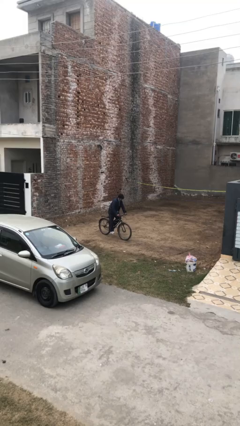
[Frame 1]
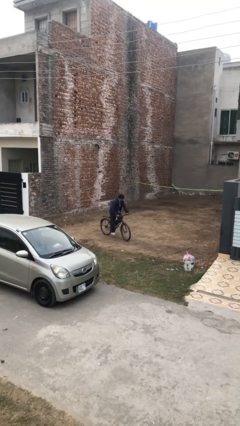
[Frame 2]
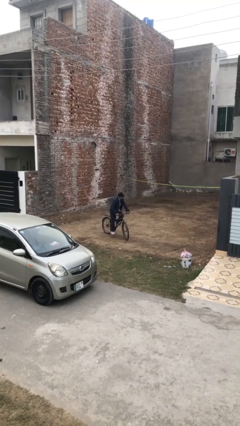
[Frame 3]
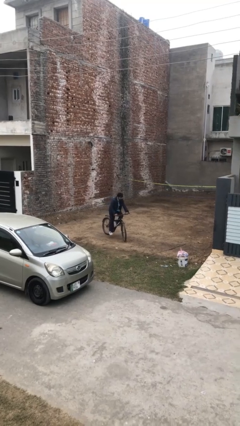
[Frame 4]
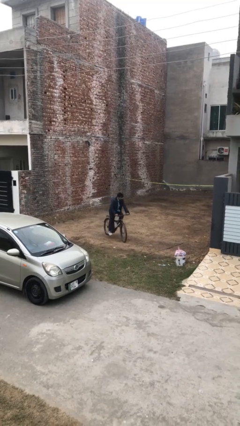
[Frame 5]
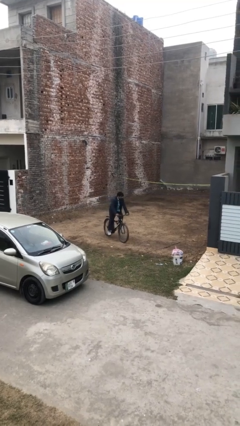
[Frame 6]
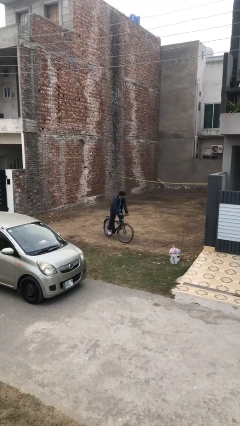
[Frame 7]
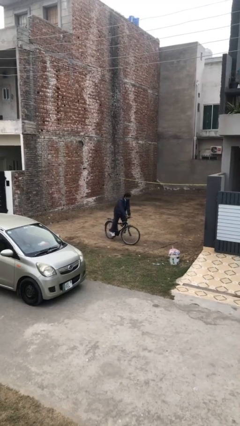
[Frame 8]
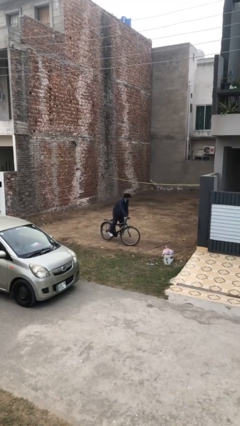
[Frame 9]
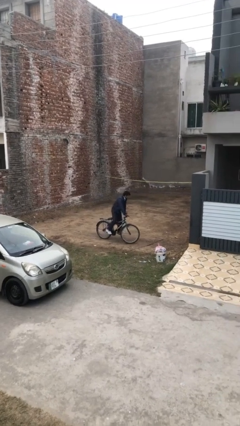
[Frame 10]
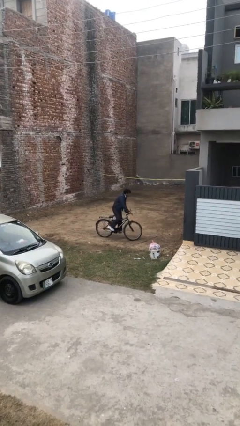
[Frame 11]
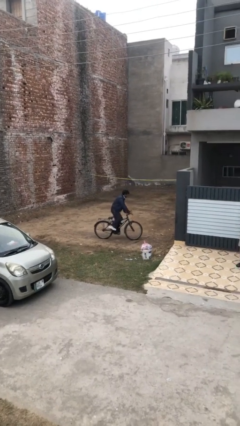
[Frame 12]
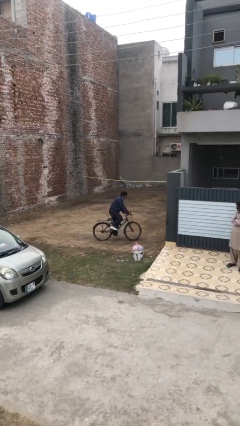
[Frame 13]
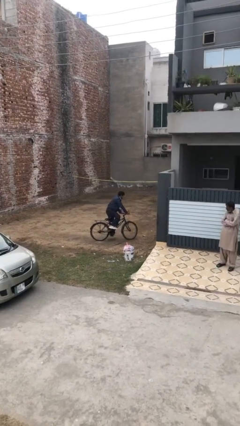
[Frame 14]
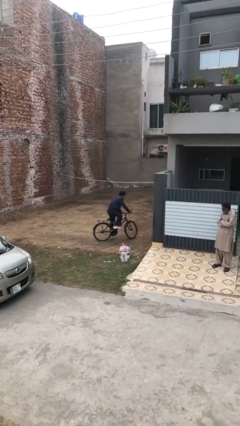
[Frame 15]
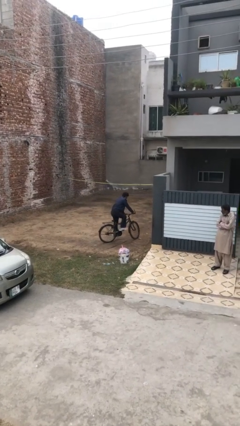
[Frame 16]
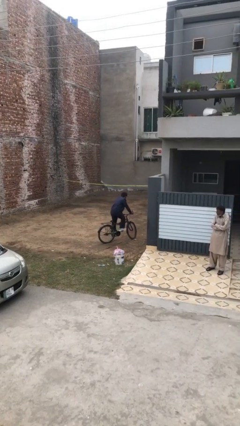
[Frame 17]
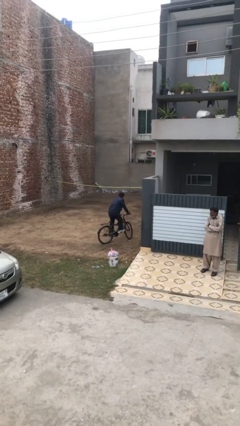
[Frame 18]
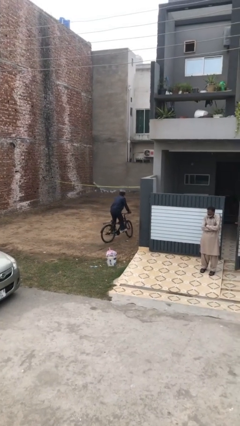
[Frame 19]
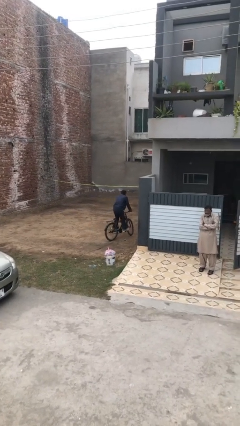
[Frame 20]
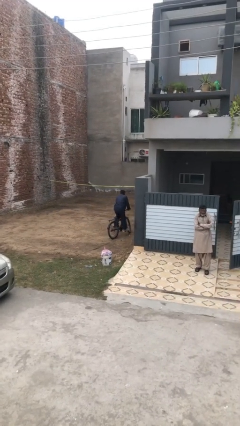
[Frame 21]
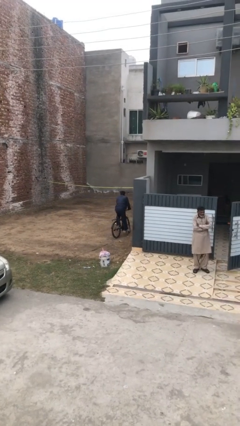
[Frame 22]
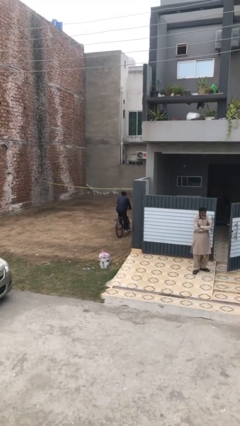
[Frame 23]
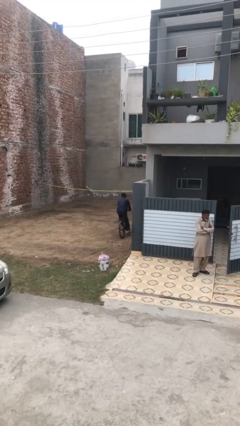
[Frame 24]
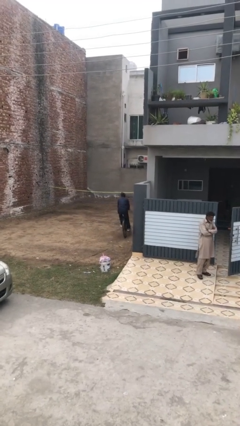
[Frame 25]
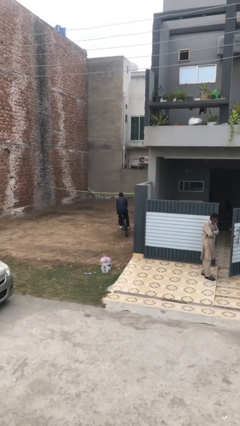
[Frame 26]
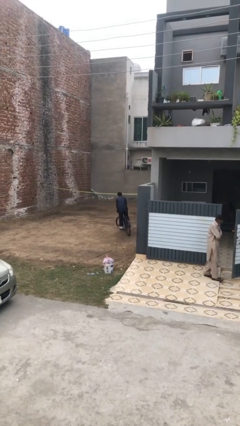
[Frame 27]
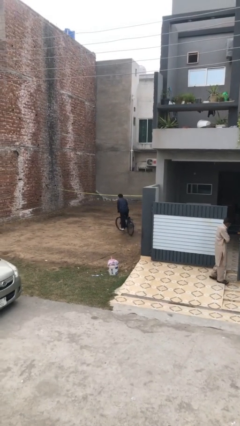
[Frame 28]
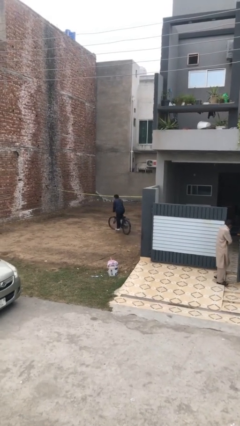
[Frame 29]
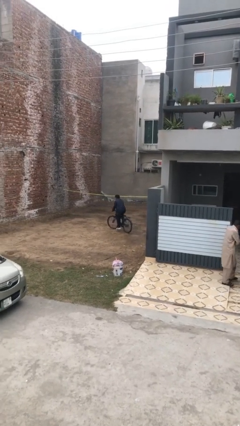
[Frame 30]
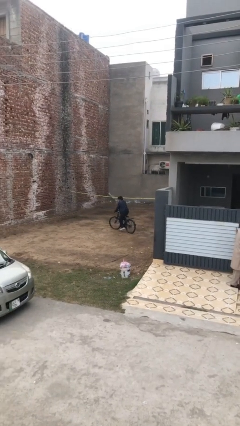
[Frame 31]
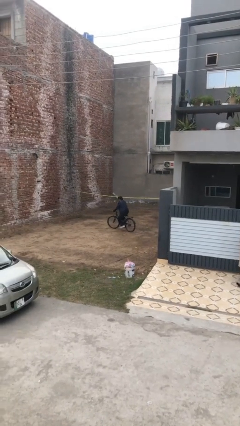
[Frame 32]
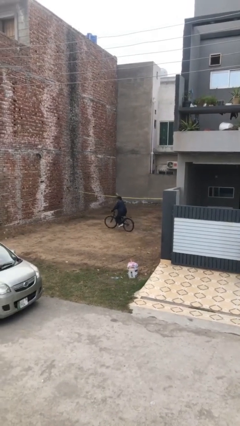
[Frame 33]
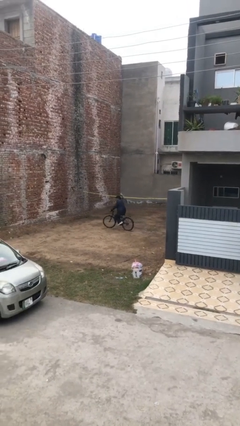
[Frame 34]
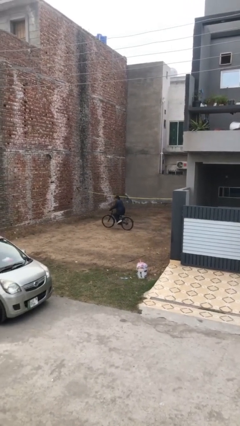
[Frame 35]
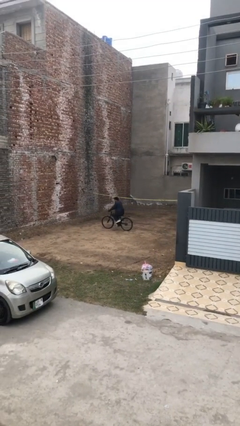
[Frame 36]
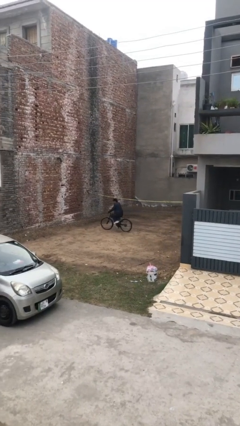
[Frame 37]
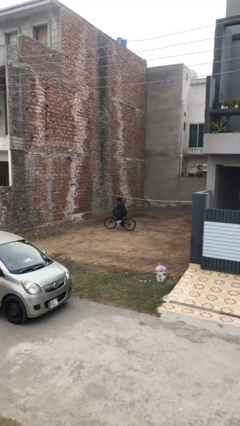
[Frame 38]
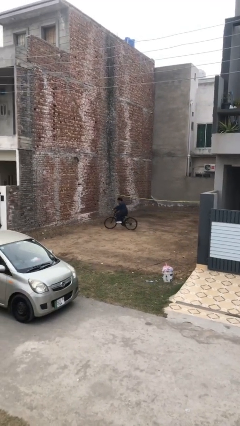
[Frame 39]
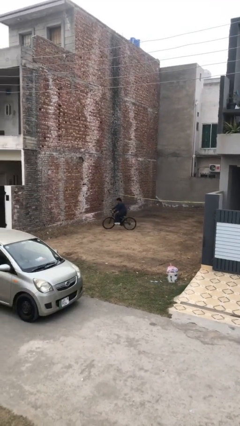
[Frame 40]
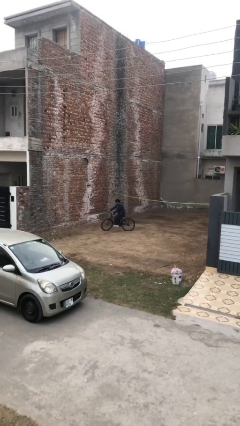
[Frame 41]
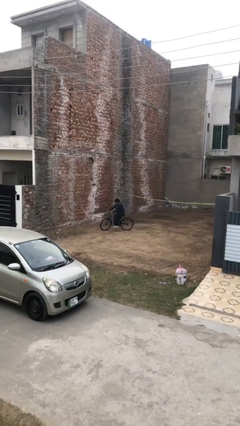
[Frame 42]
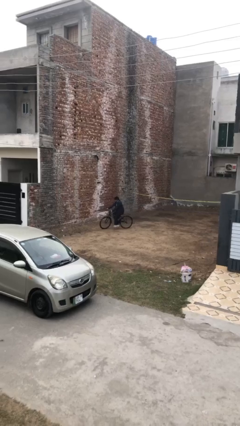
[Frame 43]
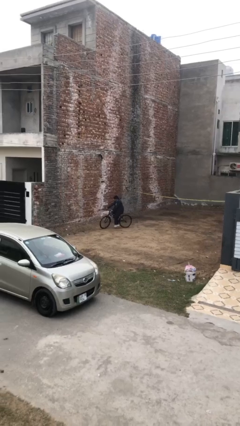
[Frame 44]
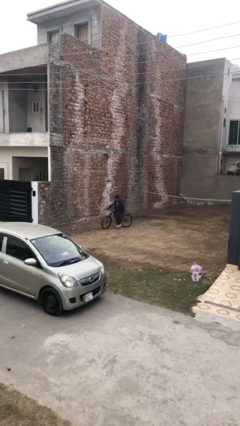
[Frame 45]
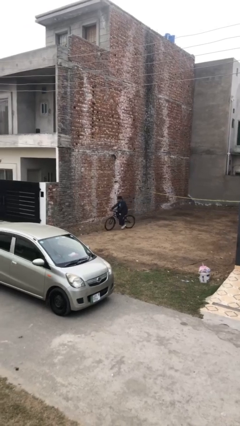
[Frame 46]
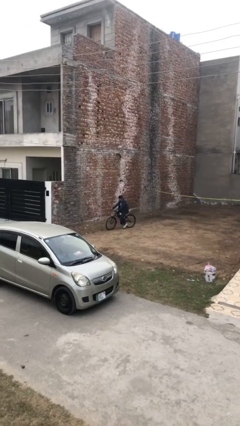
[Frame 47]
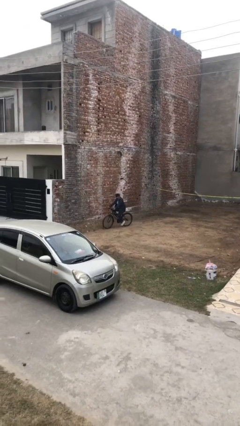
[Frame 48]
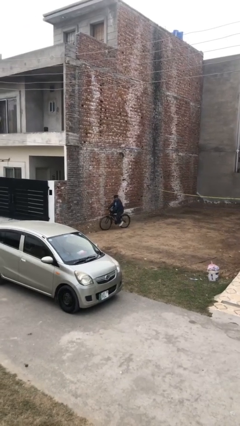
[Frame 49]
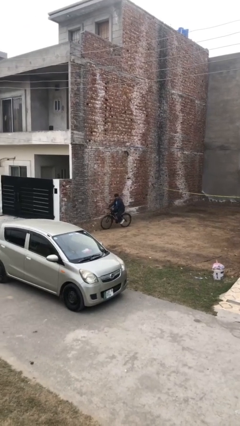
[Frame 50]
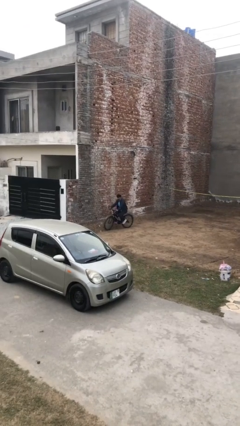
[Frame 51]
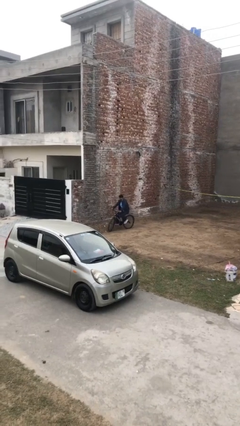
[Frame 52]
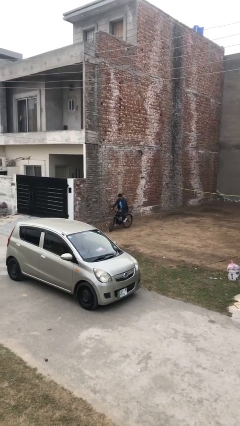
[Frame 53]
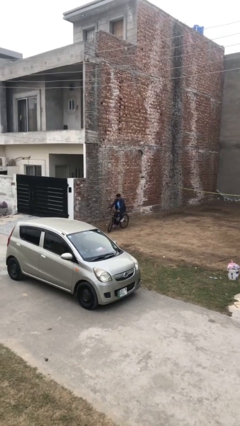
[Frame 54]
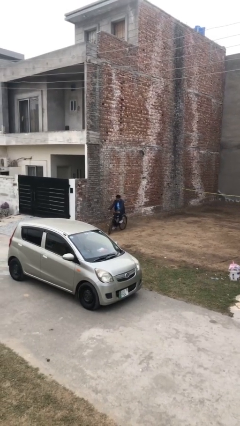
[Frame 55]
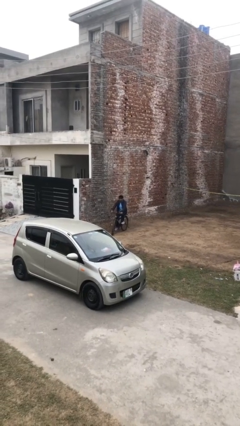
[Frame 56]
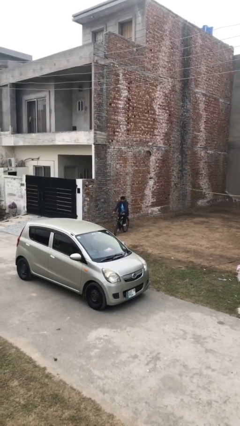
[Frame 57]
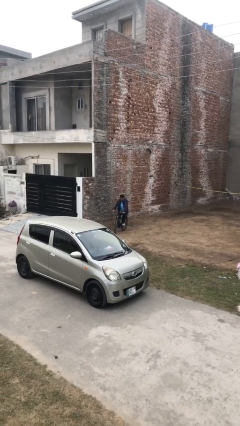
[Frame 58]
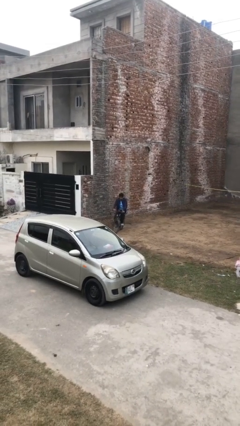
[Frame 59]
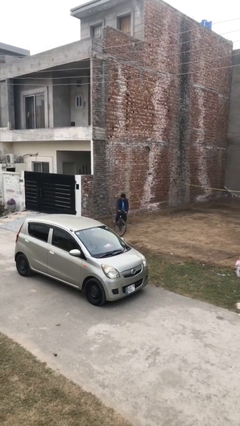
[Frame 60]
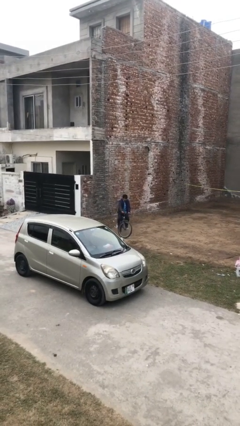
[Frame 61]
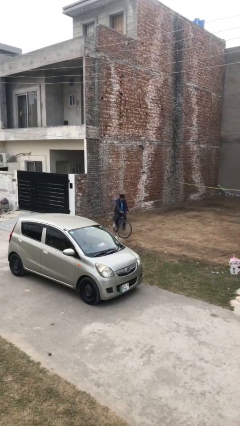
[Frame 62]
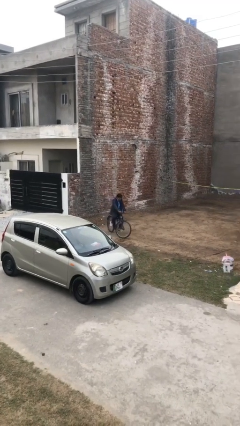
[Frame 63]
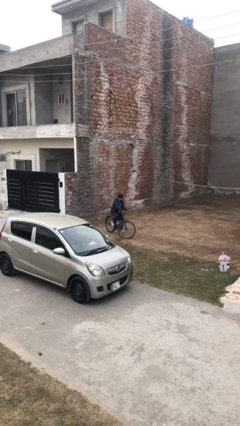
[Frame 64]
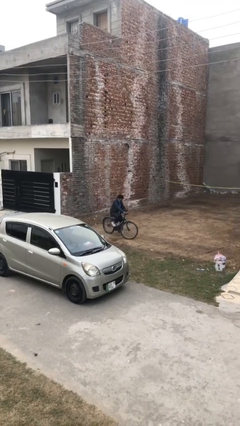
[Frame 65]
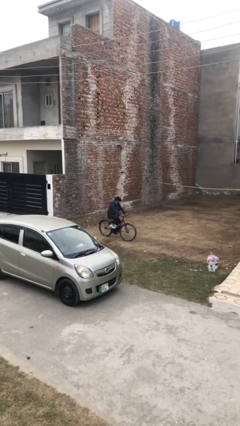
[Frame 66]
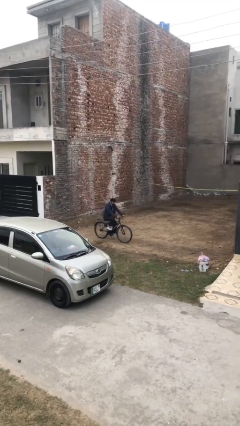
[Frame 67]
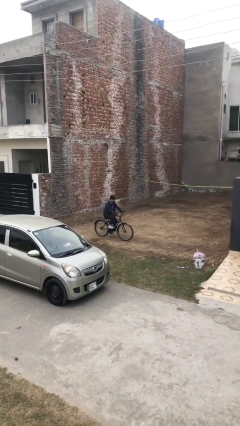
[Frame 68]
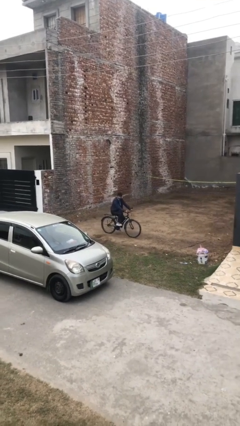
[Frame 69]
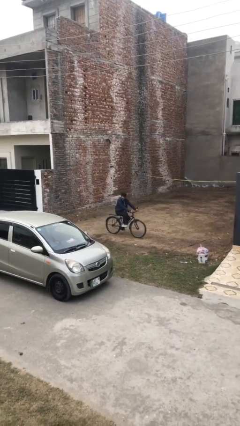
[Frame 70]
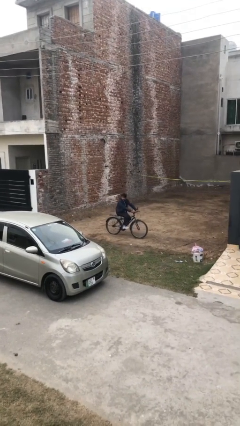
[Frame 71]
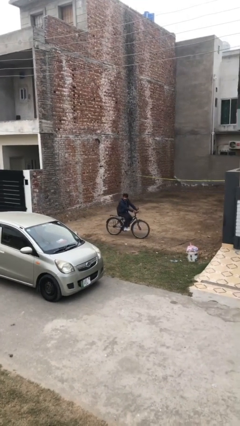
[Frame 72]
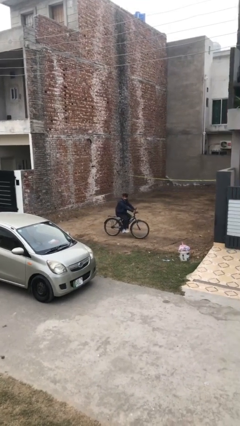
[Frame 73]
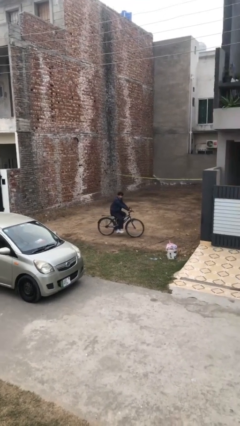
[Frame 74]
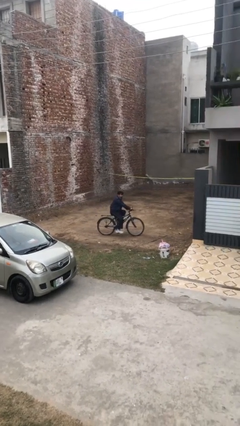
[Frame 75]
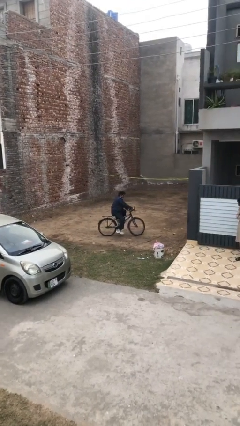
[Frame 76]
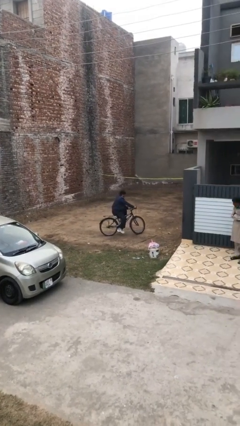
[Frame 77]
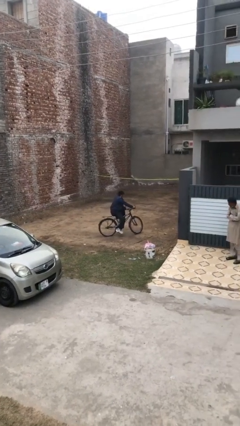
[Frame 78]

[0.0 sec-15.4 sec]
person rides bicycle

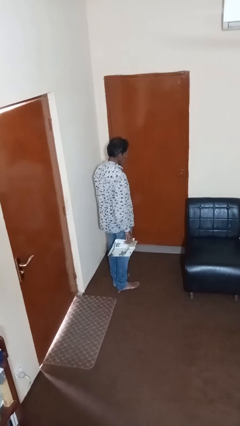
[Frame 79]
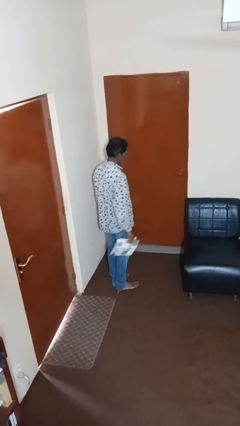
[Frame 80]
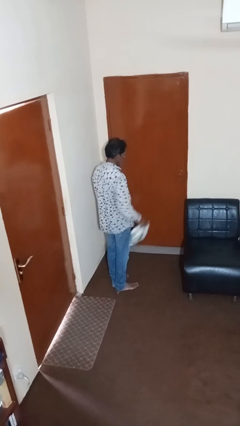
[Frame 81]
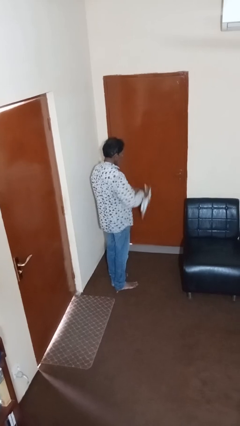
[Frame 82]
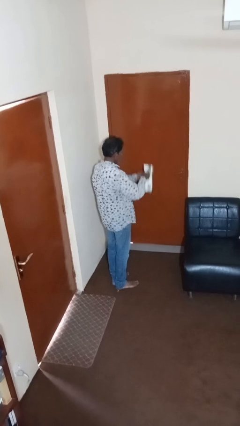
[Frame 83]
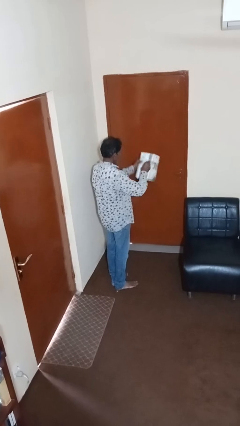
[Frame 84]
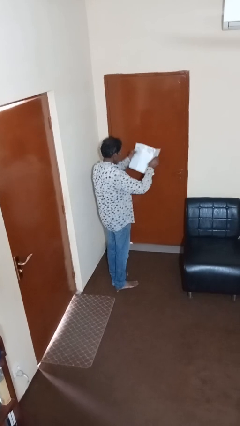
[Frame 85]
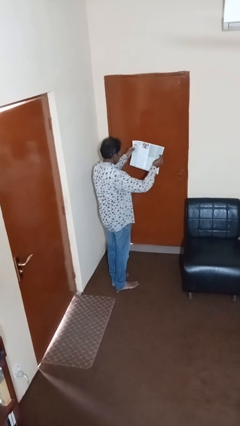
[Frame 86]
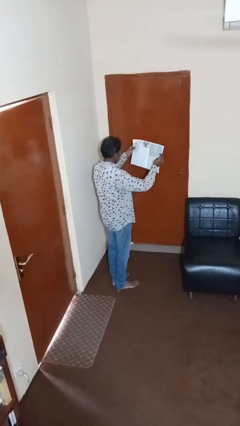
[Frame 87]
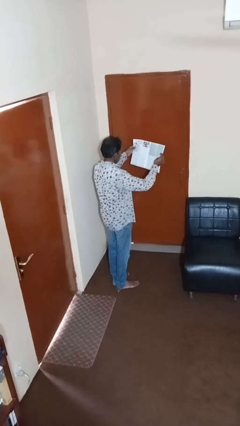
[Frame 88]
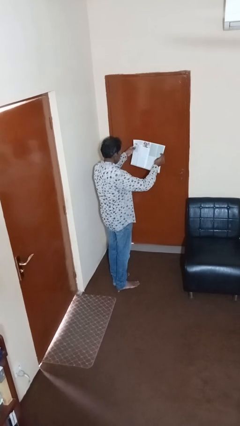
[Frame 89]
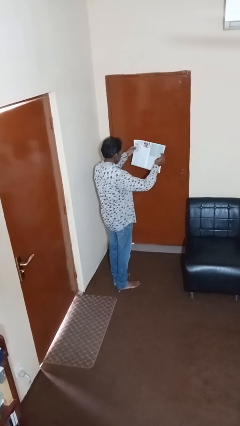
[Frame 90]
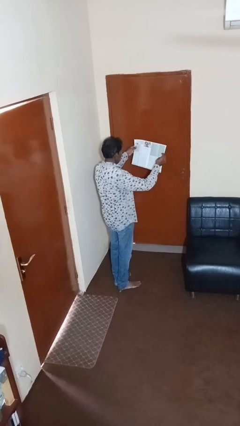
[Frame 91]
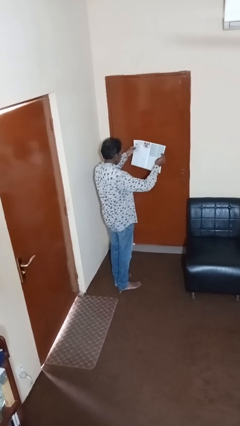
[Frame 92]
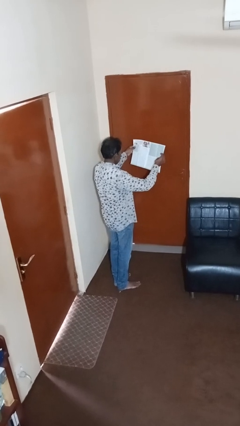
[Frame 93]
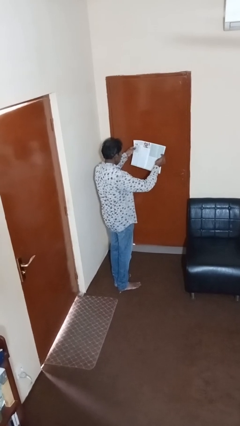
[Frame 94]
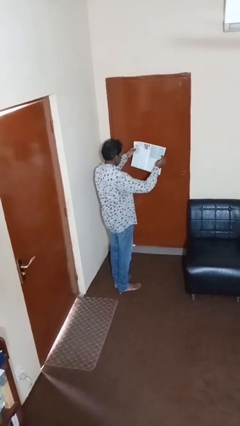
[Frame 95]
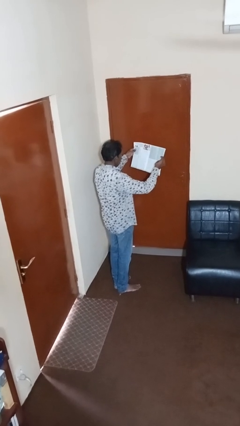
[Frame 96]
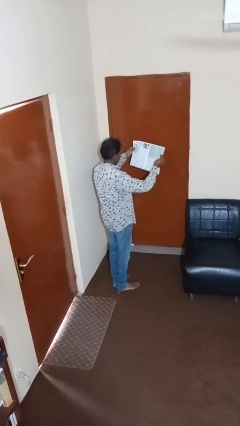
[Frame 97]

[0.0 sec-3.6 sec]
person reads magazine
